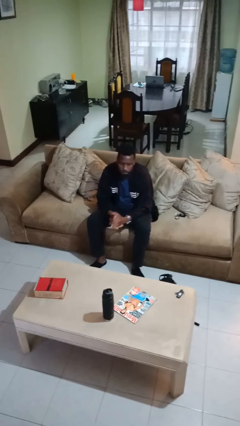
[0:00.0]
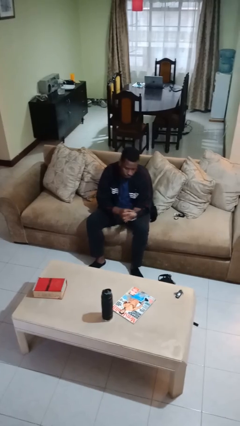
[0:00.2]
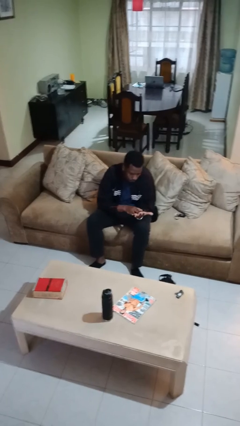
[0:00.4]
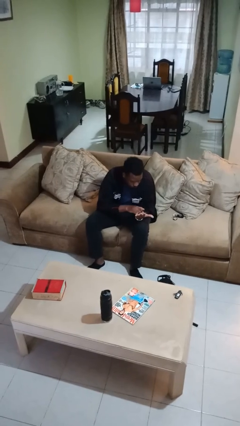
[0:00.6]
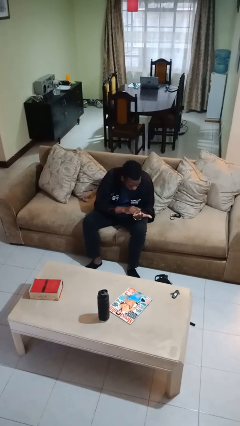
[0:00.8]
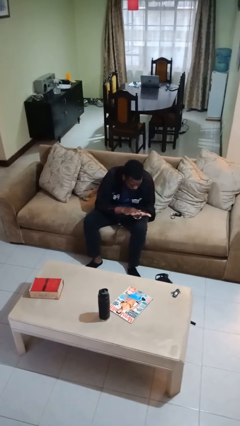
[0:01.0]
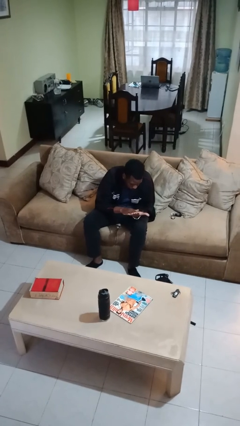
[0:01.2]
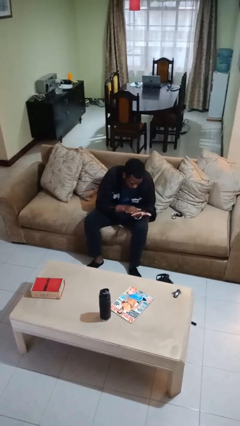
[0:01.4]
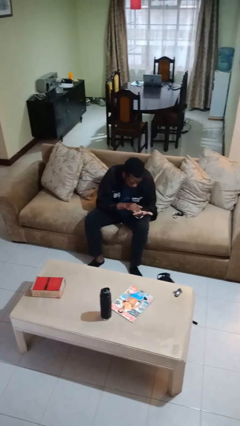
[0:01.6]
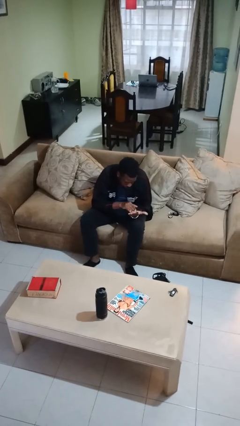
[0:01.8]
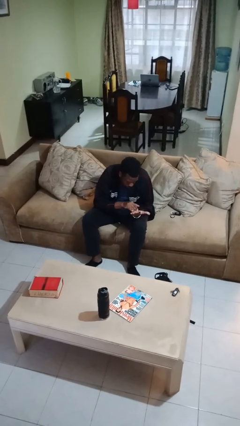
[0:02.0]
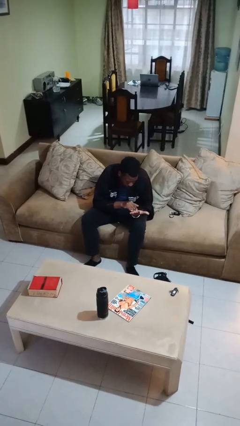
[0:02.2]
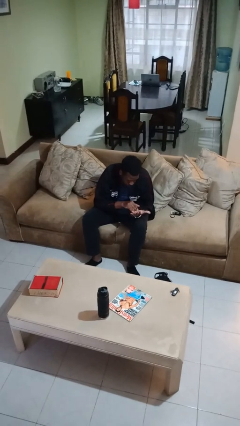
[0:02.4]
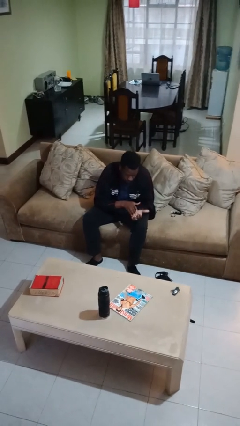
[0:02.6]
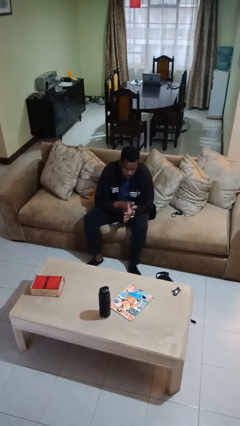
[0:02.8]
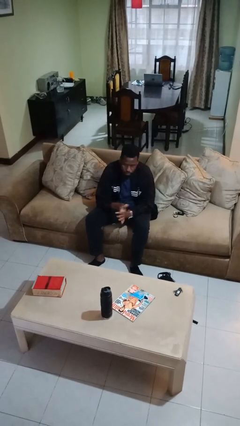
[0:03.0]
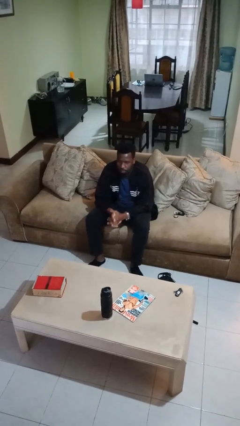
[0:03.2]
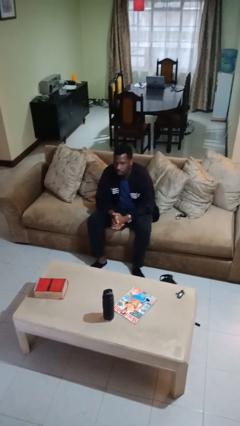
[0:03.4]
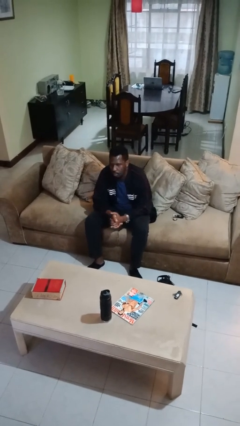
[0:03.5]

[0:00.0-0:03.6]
person looks at hands in lap

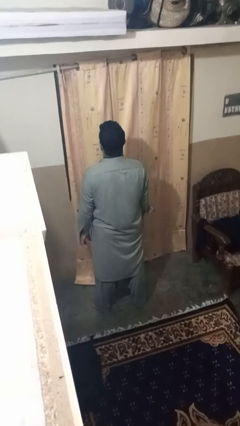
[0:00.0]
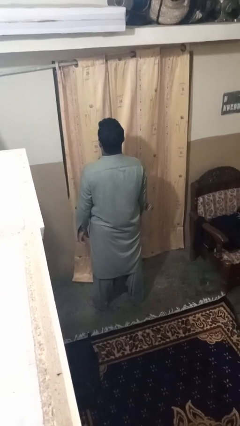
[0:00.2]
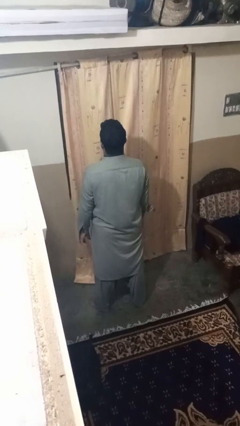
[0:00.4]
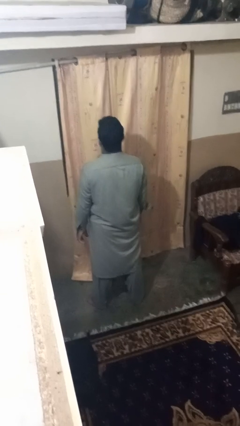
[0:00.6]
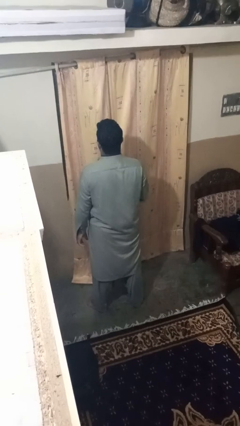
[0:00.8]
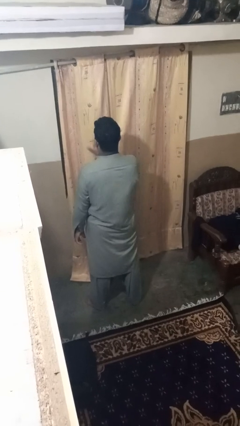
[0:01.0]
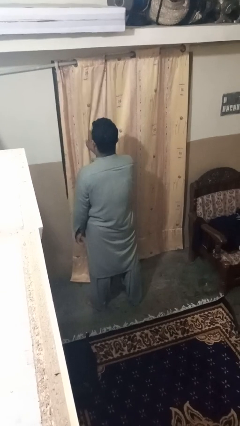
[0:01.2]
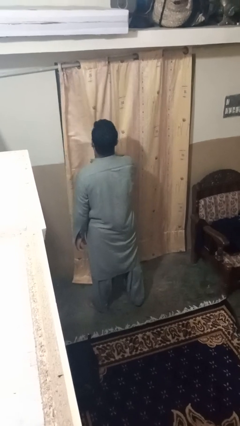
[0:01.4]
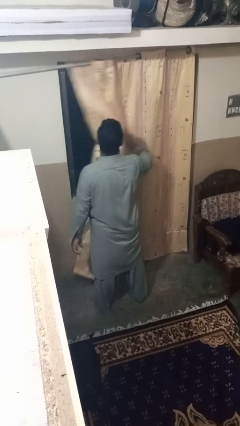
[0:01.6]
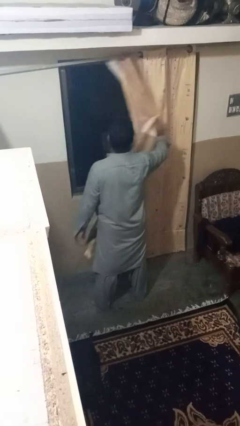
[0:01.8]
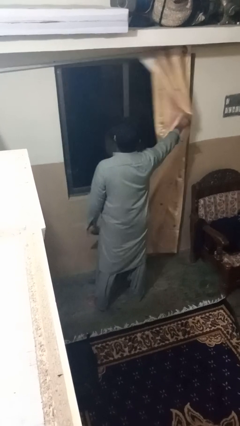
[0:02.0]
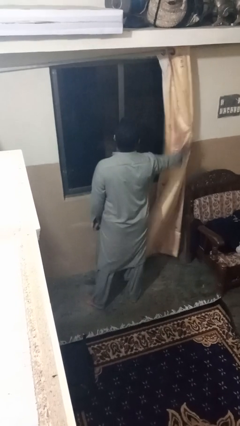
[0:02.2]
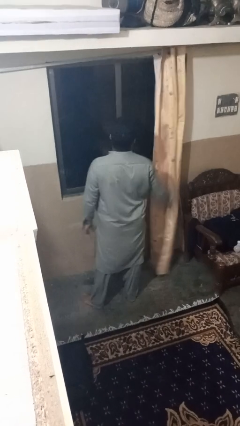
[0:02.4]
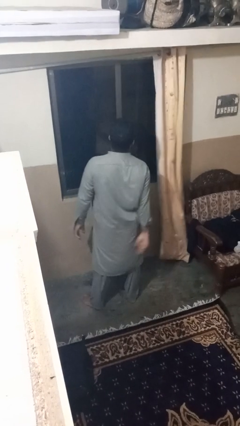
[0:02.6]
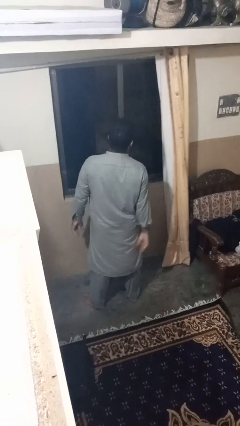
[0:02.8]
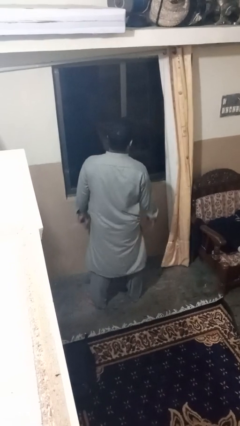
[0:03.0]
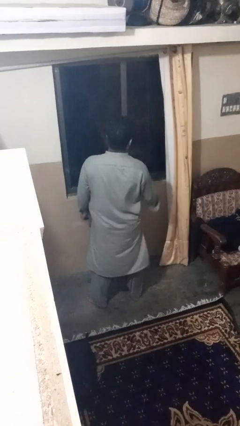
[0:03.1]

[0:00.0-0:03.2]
person opens curtains

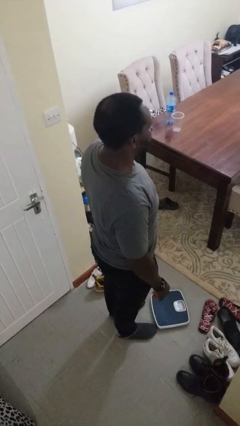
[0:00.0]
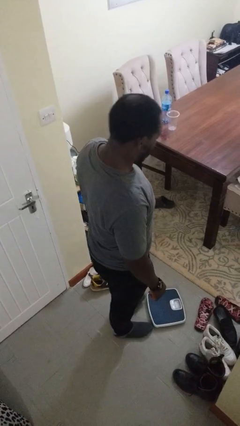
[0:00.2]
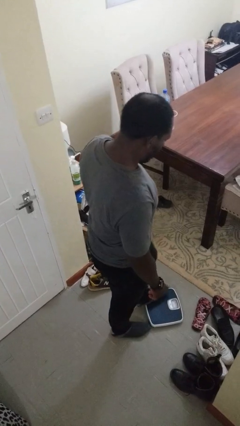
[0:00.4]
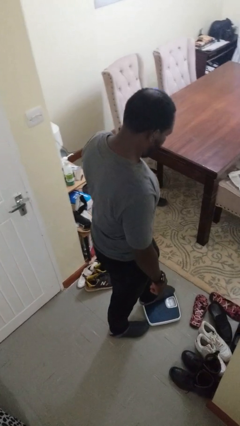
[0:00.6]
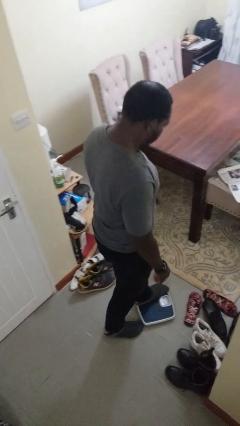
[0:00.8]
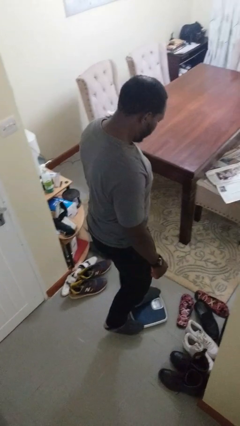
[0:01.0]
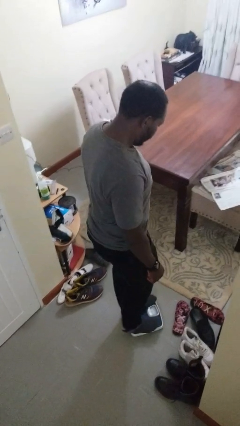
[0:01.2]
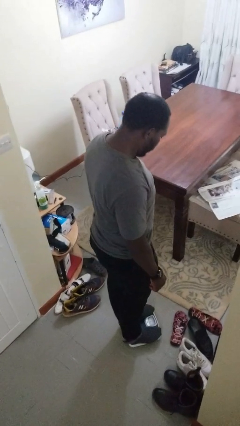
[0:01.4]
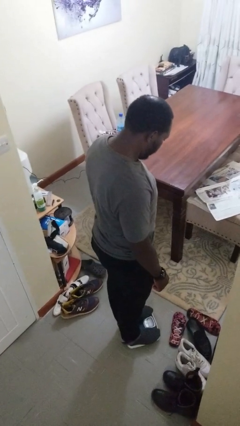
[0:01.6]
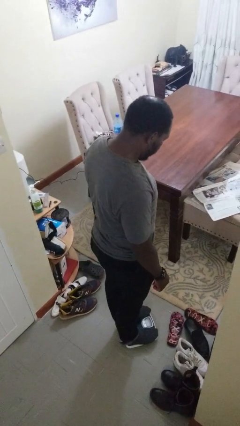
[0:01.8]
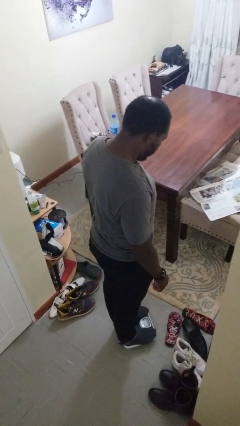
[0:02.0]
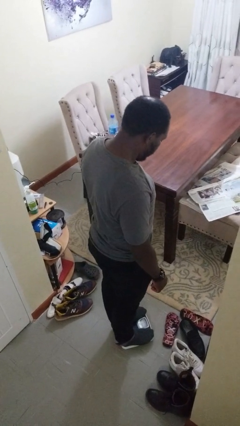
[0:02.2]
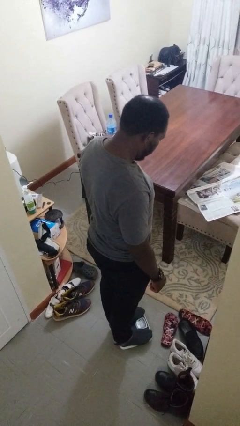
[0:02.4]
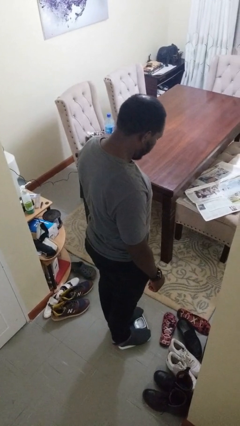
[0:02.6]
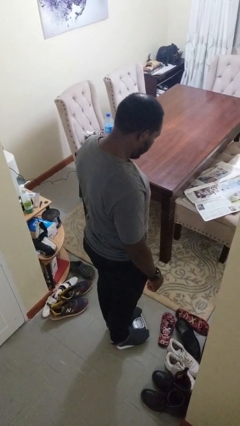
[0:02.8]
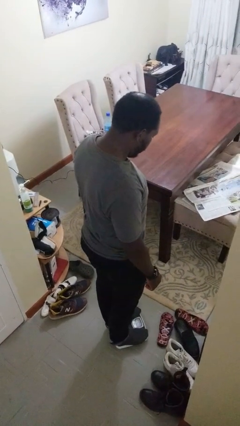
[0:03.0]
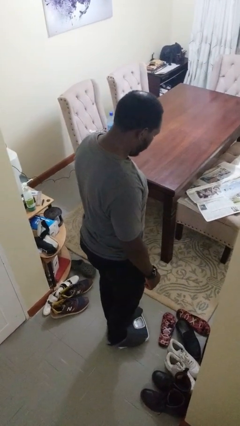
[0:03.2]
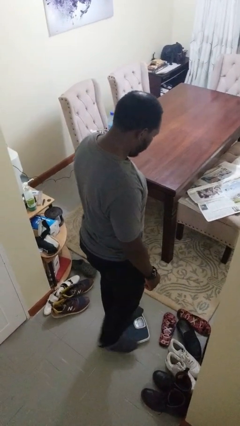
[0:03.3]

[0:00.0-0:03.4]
person uses bodyweight scale

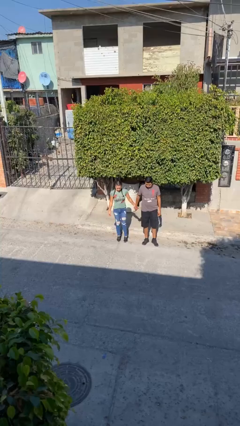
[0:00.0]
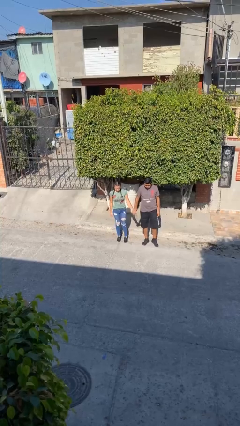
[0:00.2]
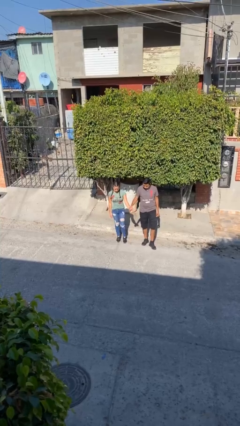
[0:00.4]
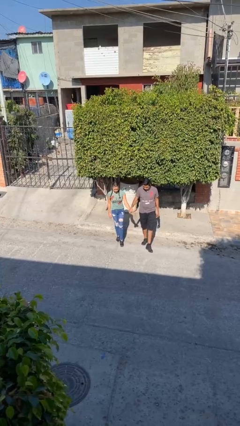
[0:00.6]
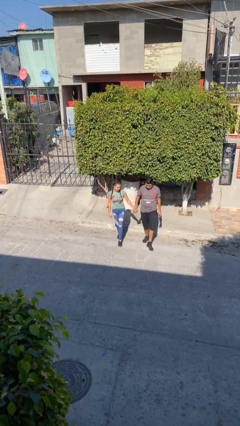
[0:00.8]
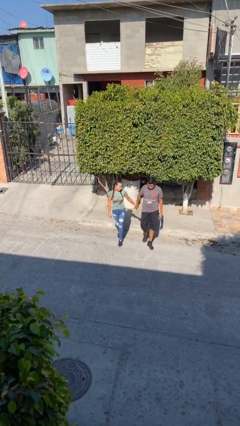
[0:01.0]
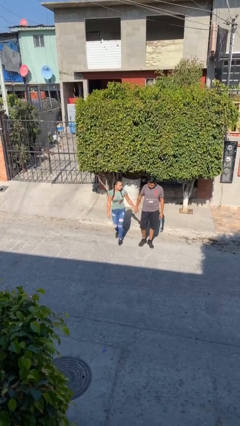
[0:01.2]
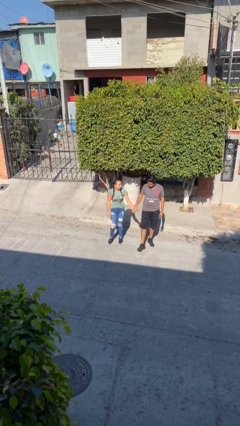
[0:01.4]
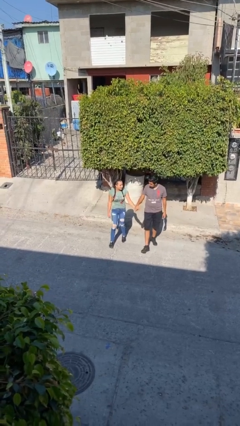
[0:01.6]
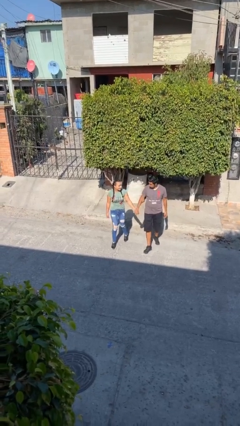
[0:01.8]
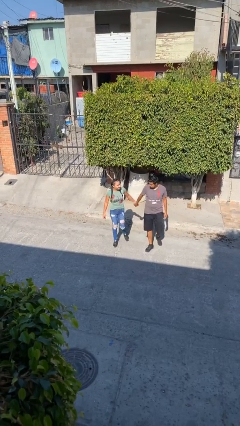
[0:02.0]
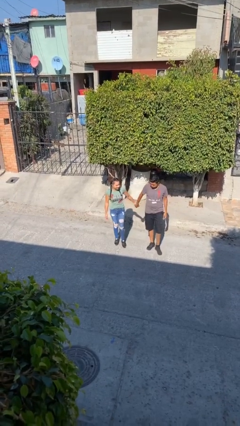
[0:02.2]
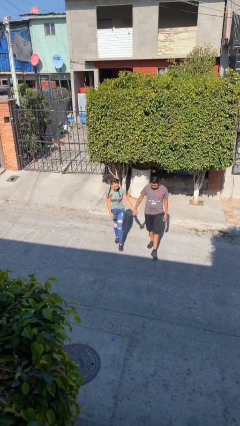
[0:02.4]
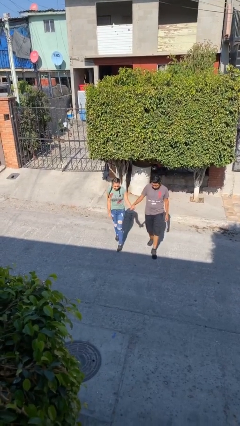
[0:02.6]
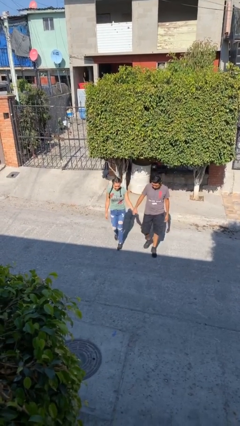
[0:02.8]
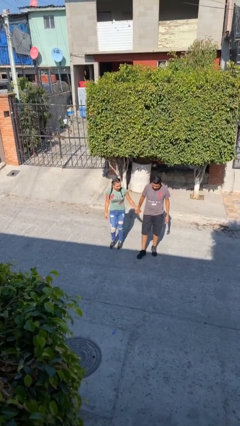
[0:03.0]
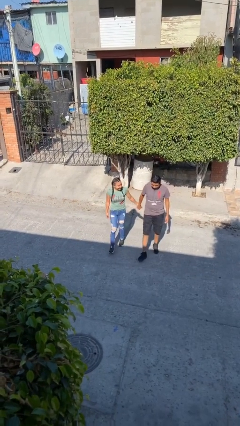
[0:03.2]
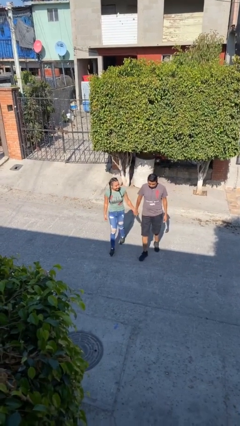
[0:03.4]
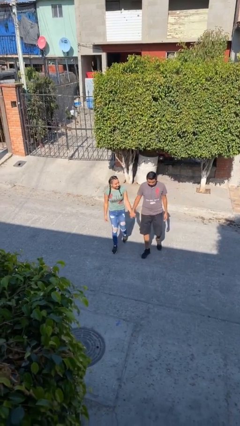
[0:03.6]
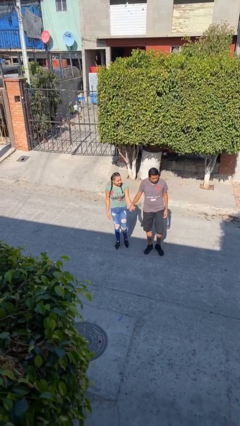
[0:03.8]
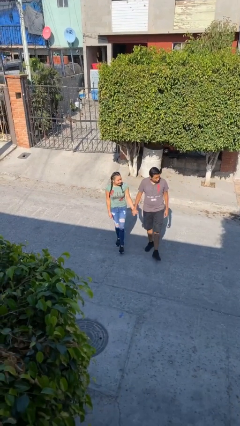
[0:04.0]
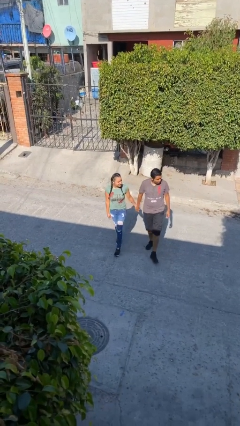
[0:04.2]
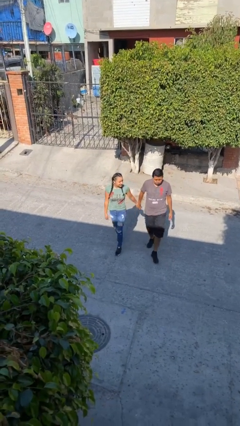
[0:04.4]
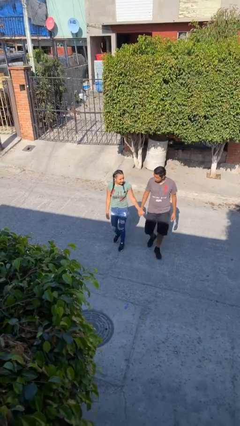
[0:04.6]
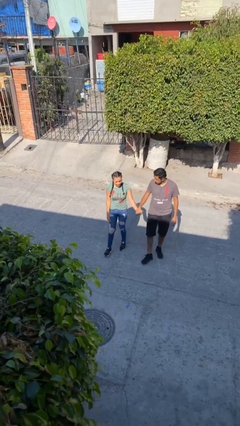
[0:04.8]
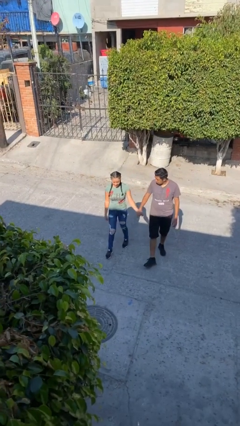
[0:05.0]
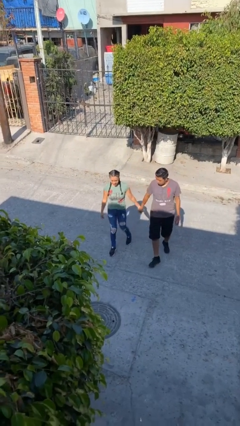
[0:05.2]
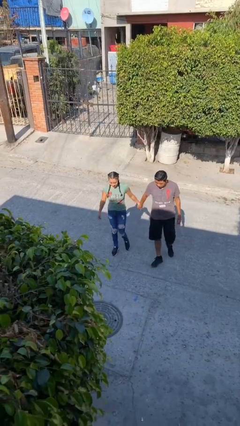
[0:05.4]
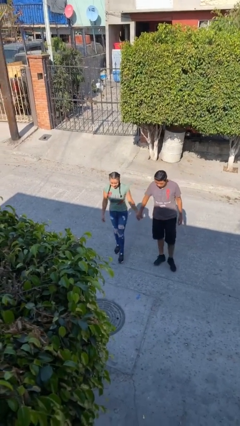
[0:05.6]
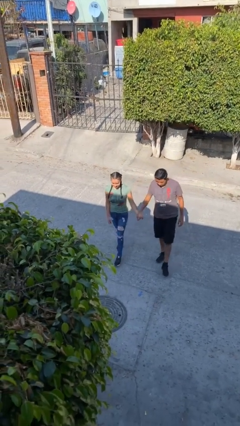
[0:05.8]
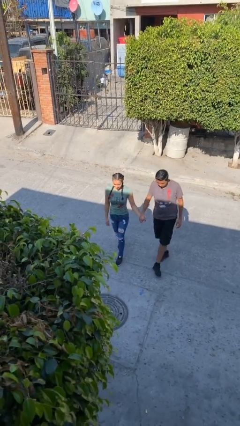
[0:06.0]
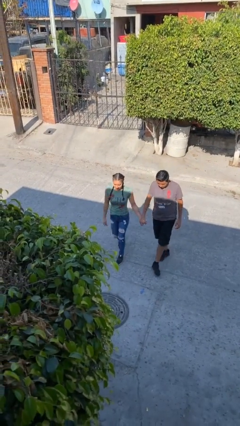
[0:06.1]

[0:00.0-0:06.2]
person holds hand

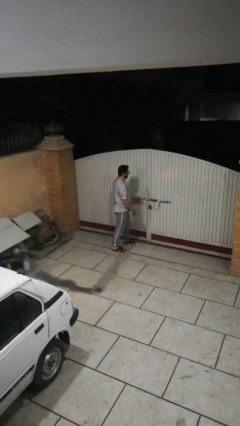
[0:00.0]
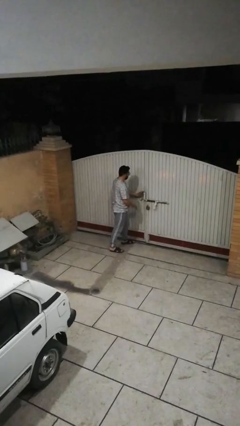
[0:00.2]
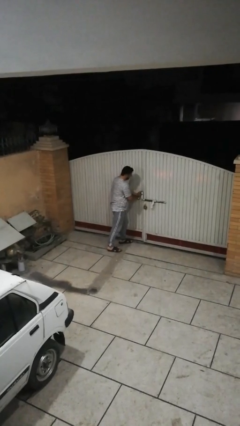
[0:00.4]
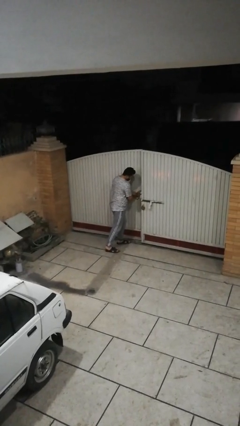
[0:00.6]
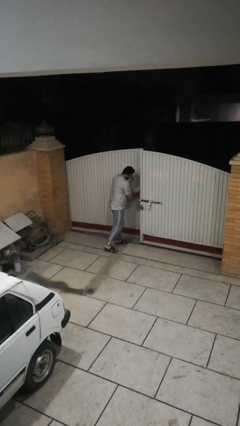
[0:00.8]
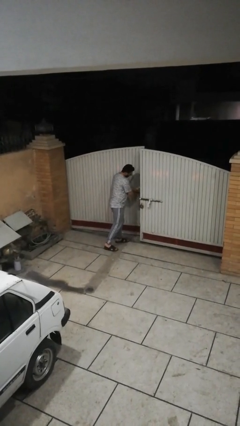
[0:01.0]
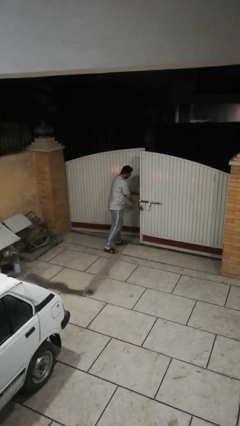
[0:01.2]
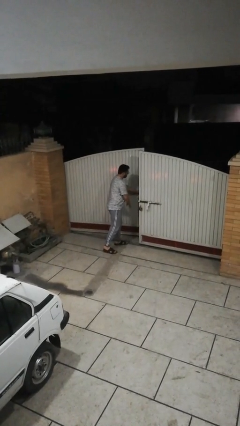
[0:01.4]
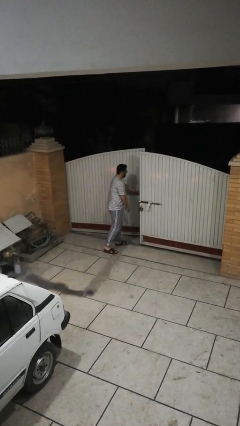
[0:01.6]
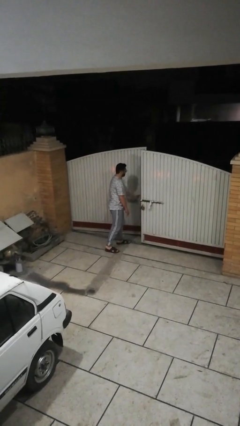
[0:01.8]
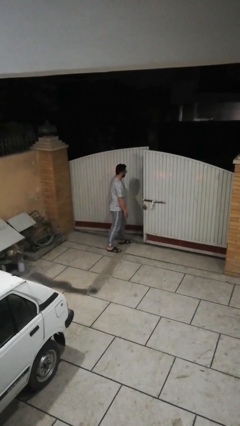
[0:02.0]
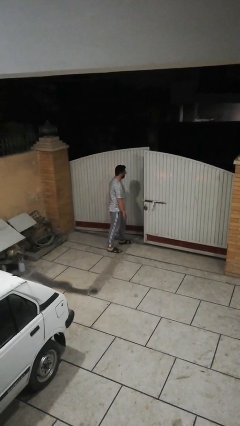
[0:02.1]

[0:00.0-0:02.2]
person opens facility door
